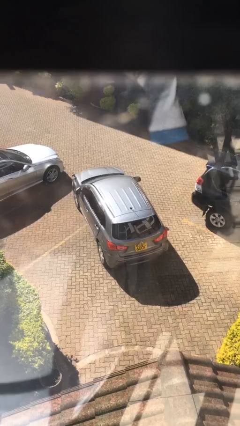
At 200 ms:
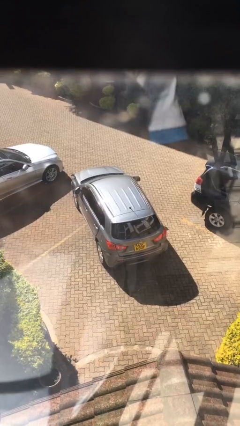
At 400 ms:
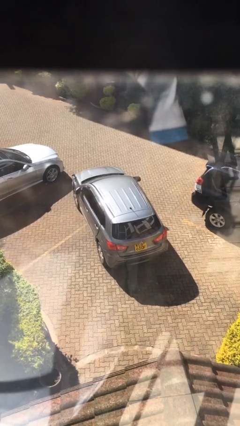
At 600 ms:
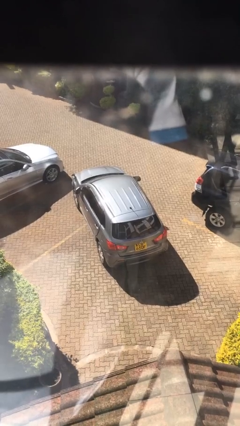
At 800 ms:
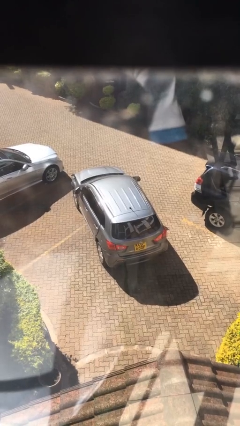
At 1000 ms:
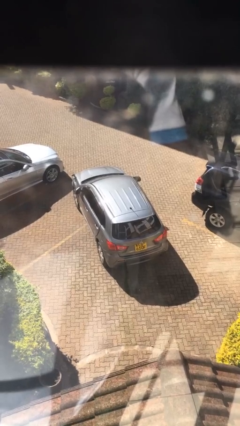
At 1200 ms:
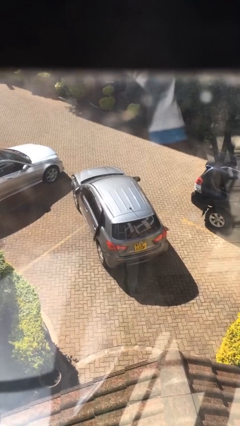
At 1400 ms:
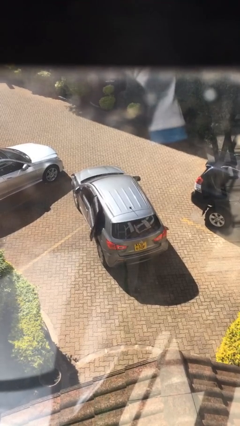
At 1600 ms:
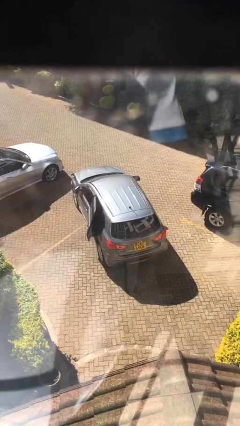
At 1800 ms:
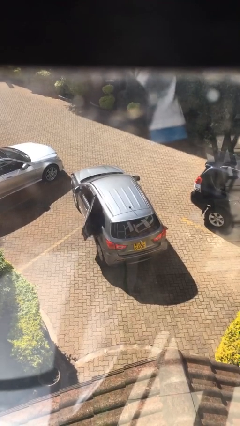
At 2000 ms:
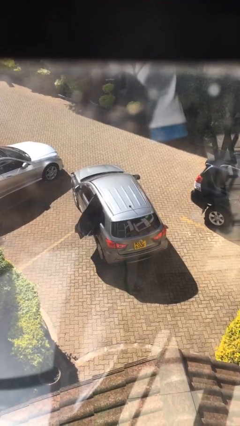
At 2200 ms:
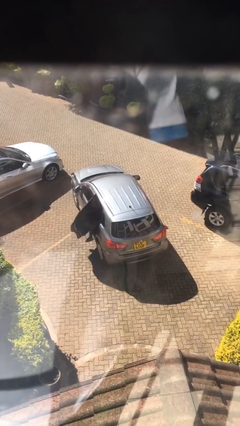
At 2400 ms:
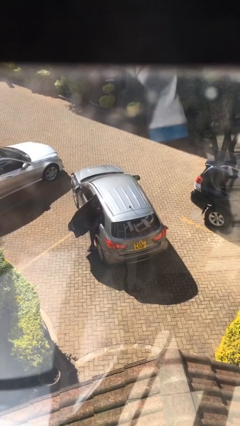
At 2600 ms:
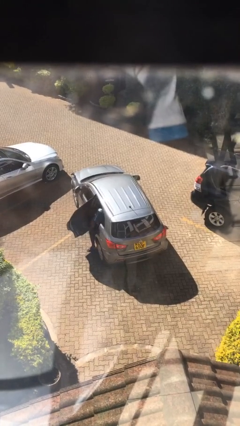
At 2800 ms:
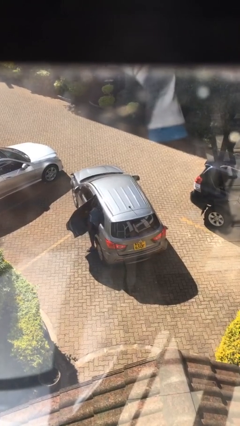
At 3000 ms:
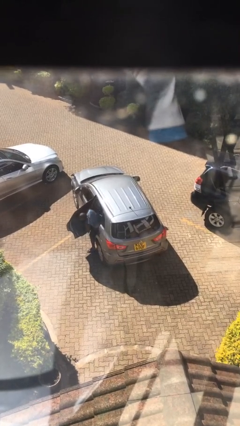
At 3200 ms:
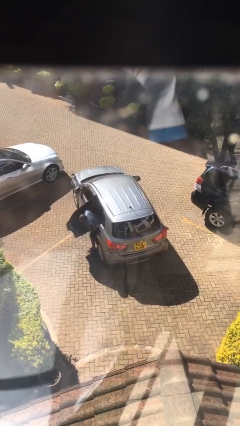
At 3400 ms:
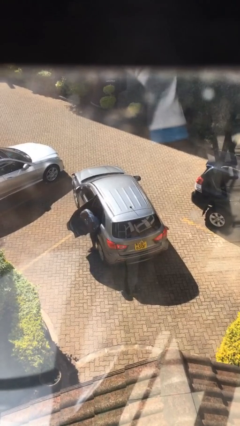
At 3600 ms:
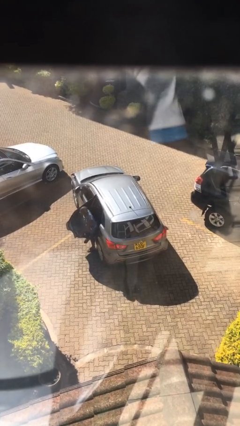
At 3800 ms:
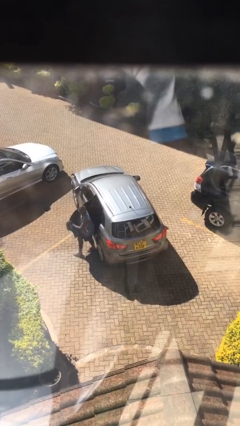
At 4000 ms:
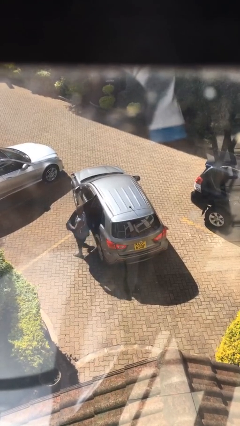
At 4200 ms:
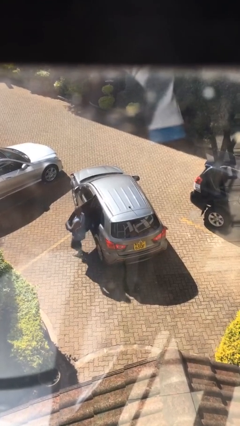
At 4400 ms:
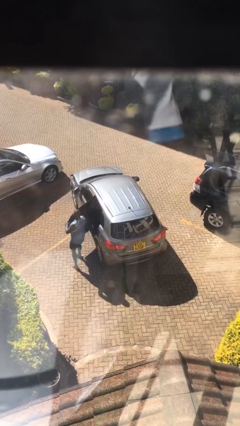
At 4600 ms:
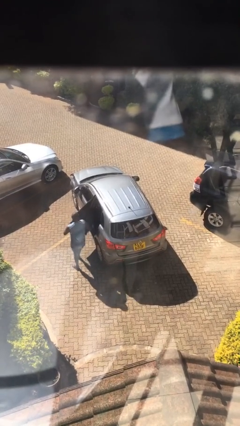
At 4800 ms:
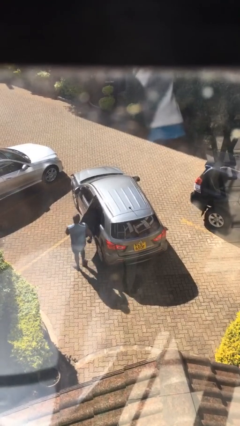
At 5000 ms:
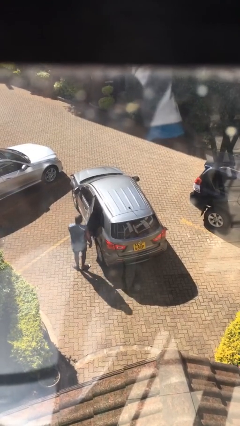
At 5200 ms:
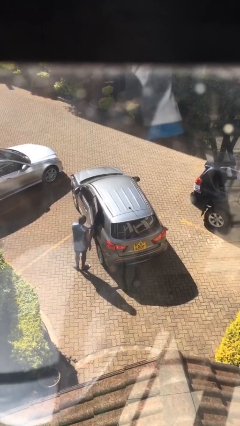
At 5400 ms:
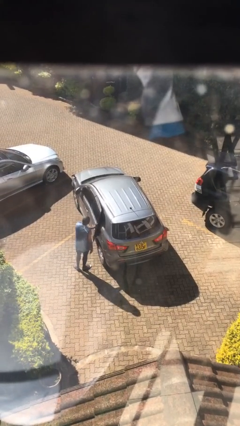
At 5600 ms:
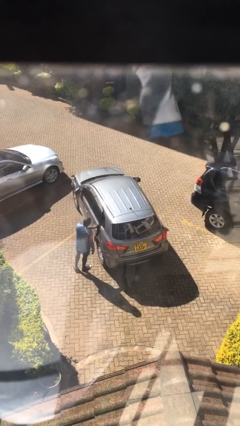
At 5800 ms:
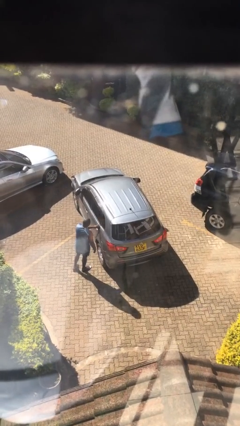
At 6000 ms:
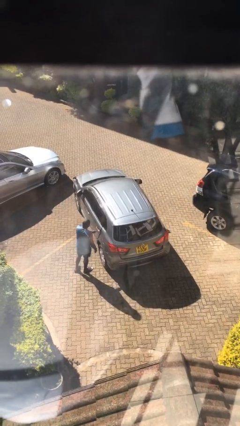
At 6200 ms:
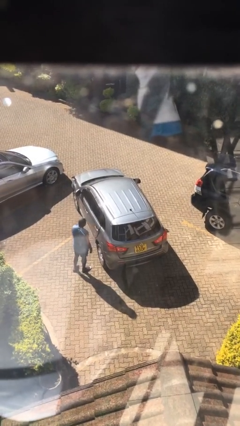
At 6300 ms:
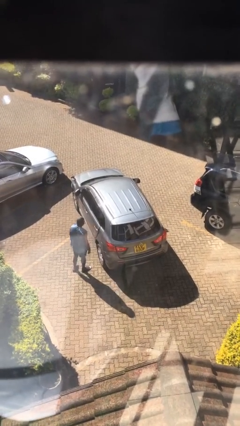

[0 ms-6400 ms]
car drops off person

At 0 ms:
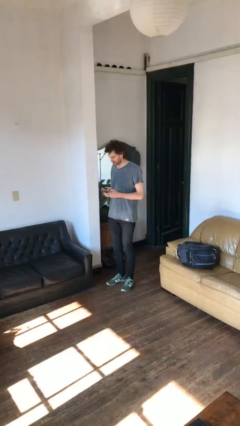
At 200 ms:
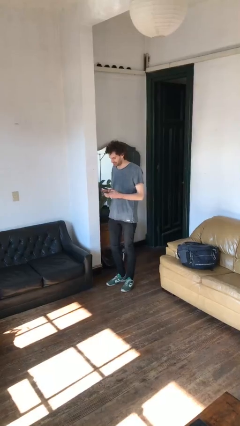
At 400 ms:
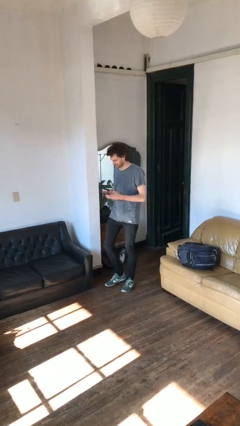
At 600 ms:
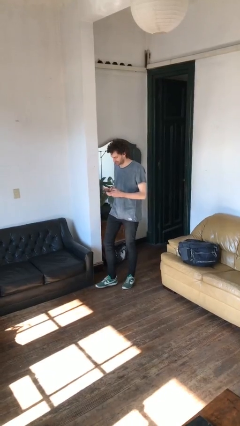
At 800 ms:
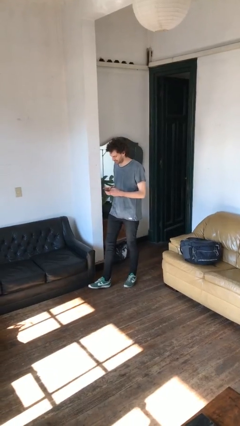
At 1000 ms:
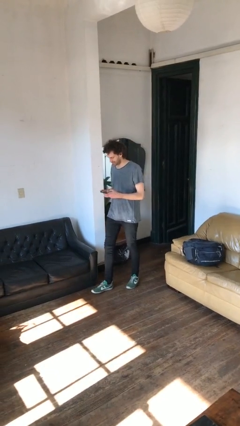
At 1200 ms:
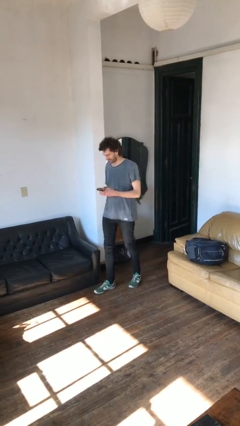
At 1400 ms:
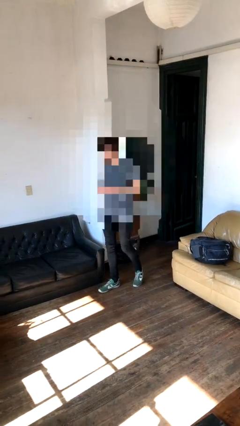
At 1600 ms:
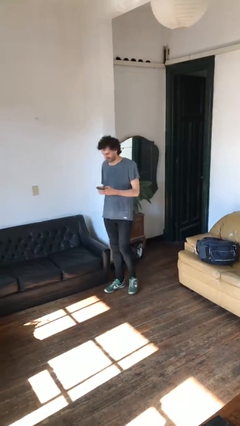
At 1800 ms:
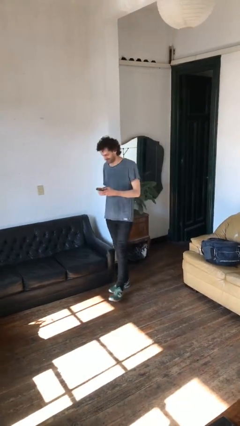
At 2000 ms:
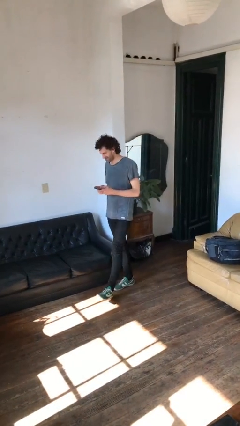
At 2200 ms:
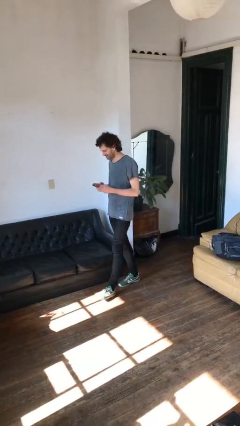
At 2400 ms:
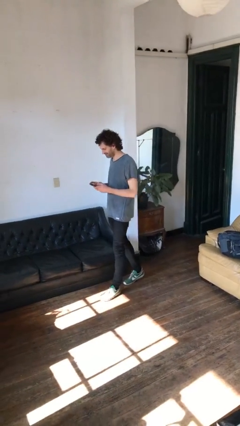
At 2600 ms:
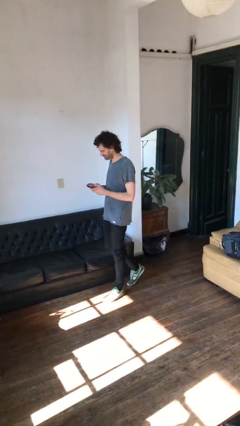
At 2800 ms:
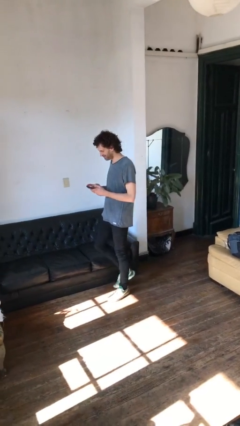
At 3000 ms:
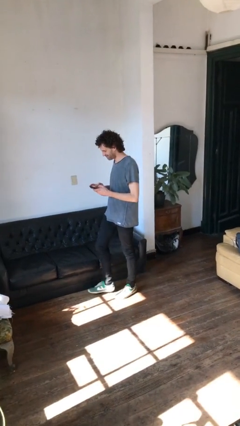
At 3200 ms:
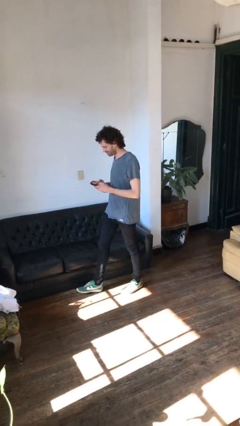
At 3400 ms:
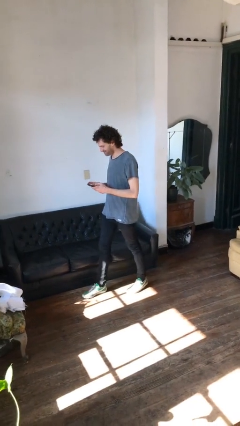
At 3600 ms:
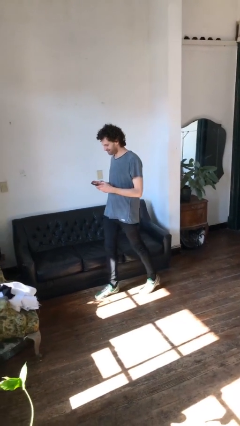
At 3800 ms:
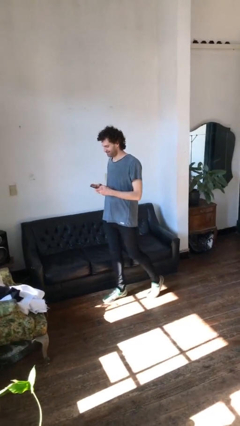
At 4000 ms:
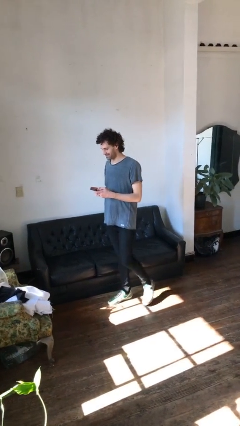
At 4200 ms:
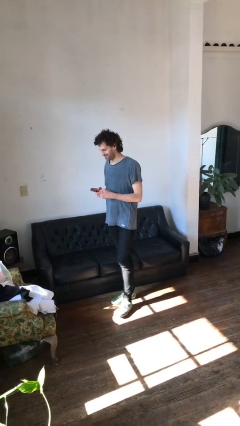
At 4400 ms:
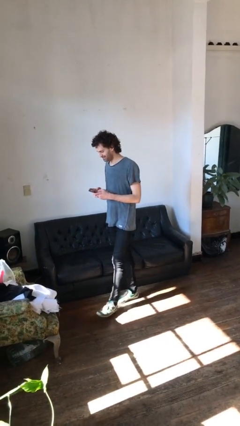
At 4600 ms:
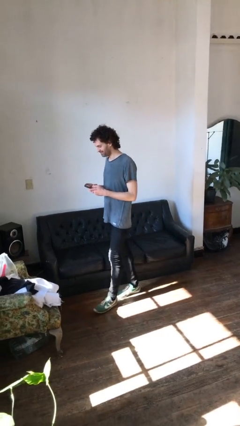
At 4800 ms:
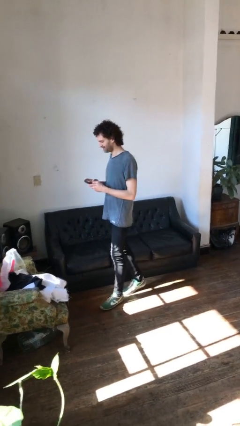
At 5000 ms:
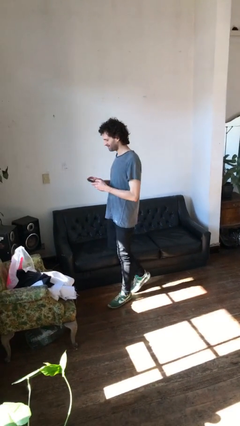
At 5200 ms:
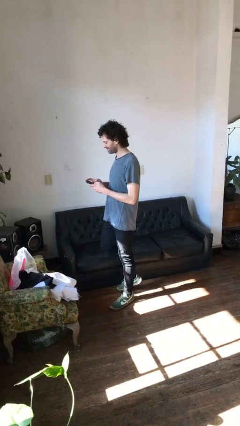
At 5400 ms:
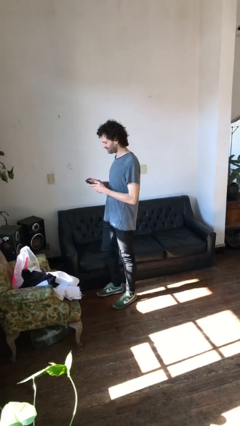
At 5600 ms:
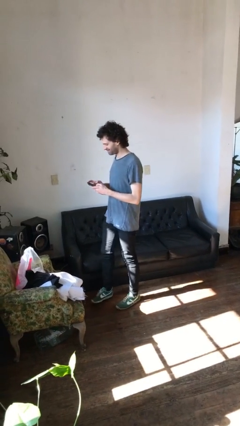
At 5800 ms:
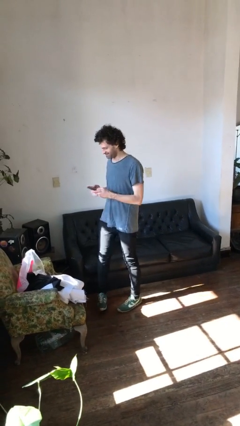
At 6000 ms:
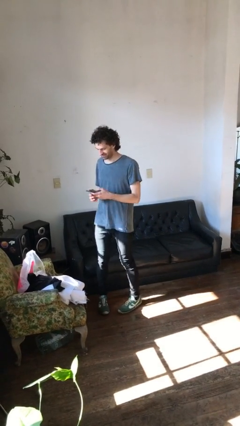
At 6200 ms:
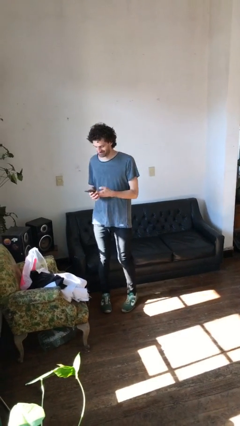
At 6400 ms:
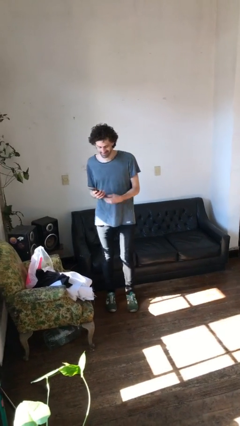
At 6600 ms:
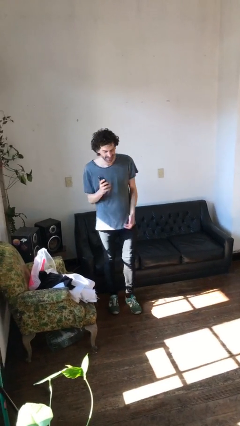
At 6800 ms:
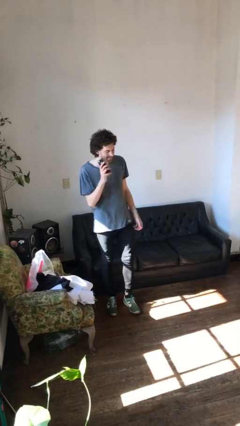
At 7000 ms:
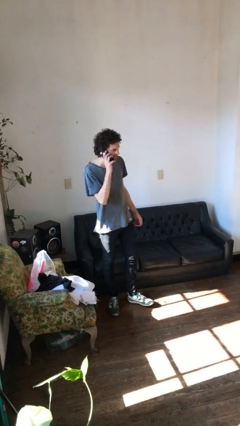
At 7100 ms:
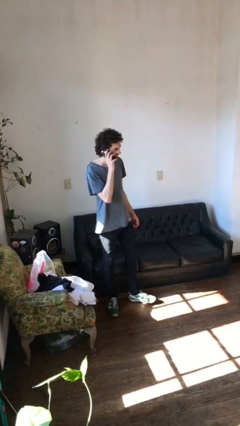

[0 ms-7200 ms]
person texts on phone

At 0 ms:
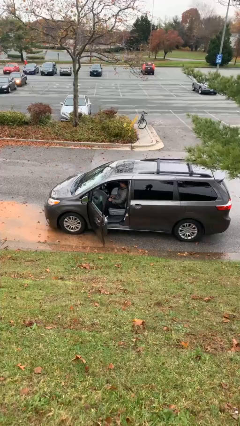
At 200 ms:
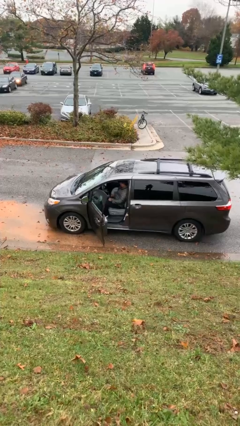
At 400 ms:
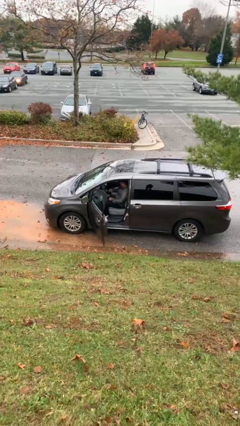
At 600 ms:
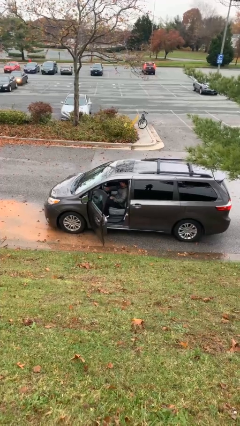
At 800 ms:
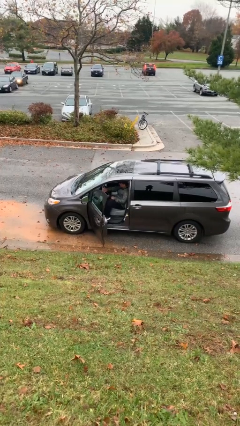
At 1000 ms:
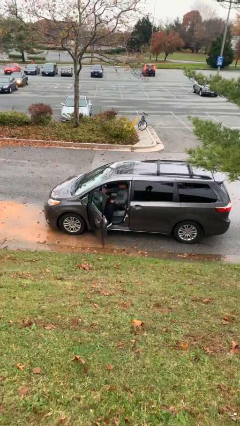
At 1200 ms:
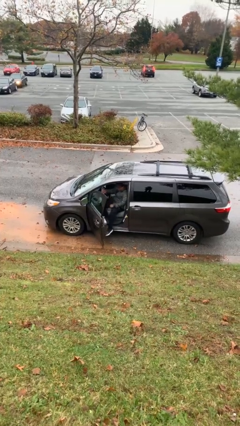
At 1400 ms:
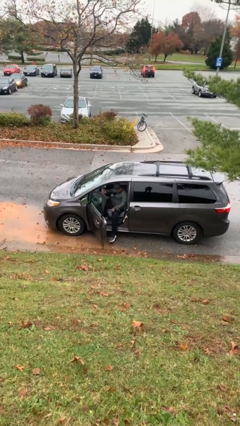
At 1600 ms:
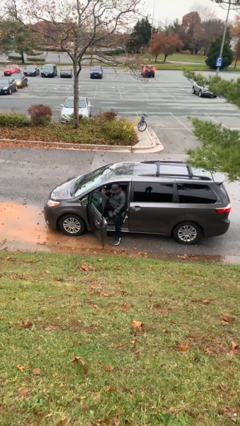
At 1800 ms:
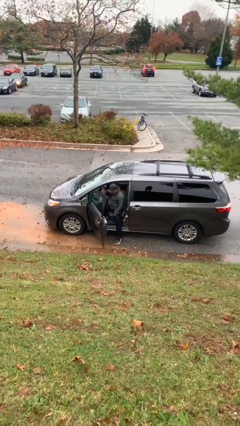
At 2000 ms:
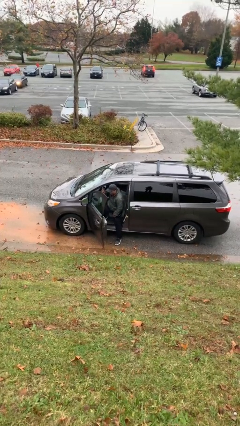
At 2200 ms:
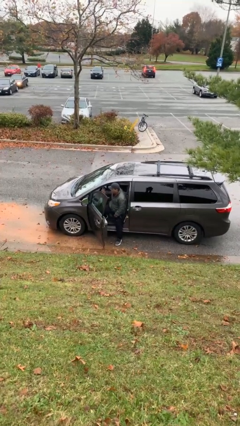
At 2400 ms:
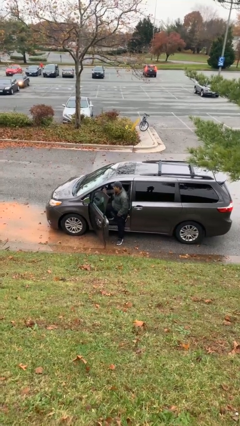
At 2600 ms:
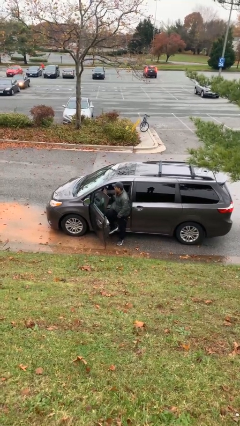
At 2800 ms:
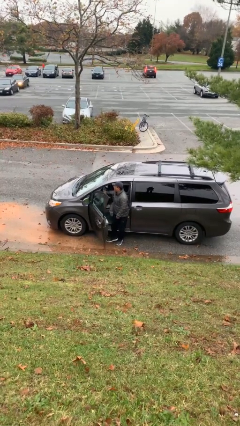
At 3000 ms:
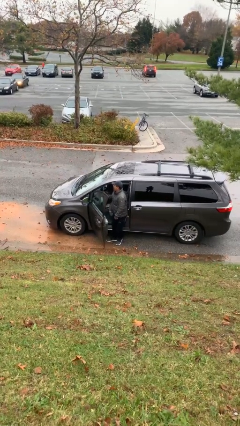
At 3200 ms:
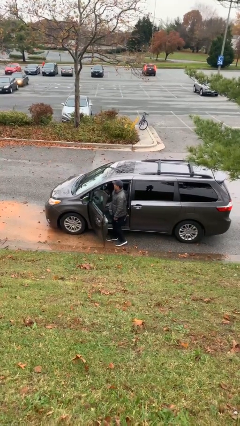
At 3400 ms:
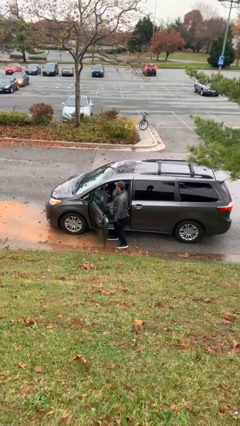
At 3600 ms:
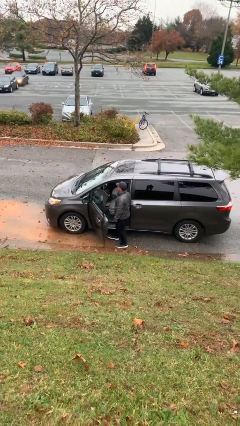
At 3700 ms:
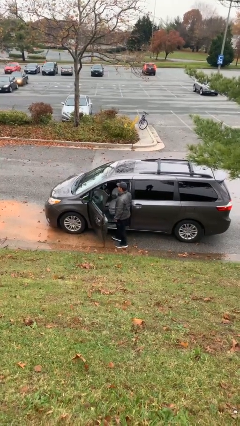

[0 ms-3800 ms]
person exits car

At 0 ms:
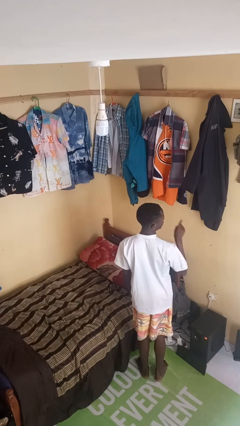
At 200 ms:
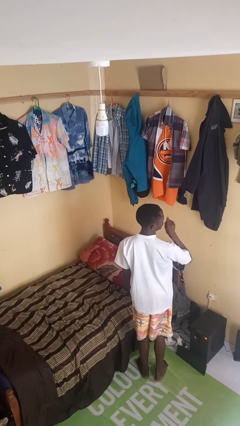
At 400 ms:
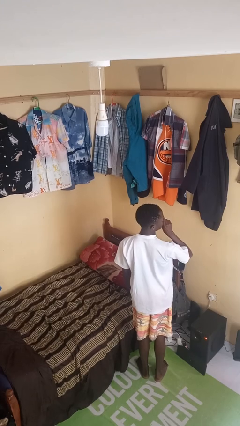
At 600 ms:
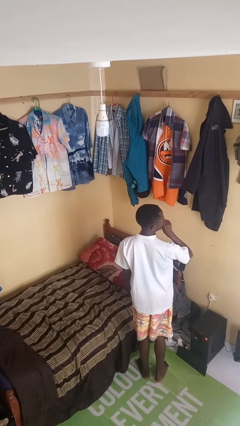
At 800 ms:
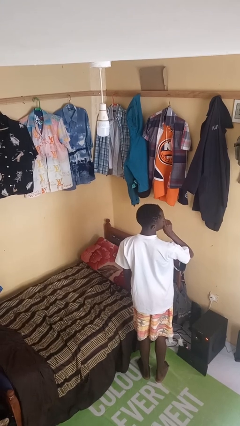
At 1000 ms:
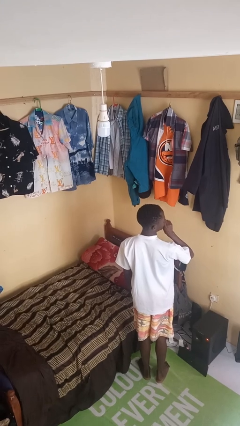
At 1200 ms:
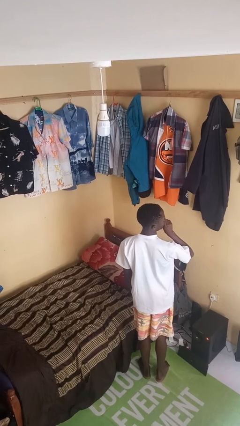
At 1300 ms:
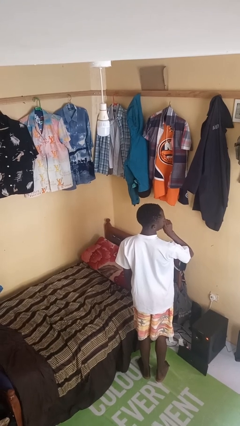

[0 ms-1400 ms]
person gestures be quiet
